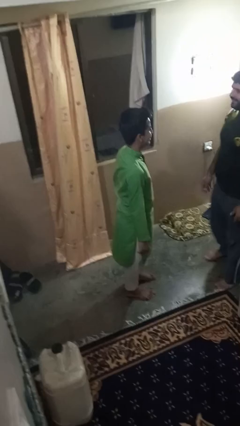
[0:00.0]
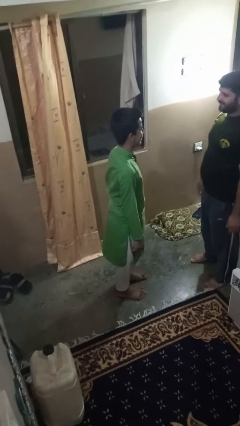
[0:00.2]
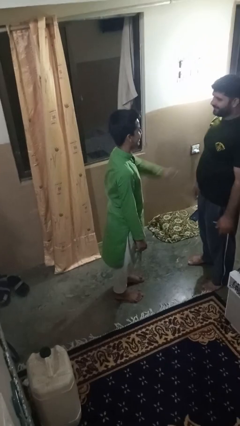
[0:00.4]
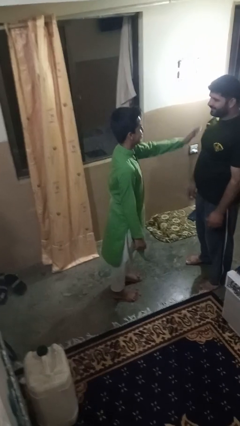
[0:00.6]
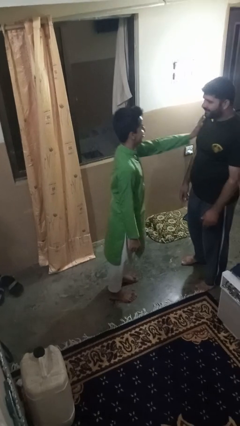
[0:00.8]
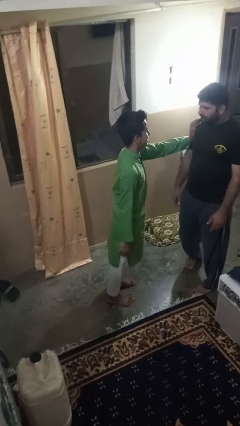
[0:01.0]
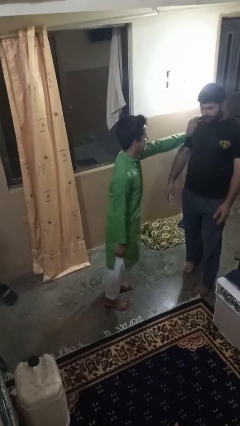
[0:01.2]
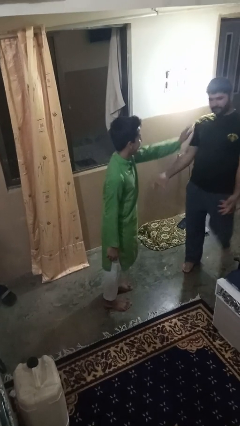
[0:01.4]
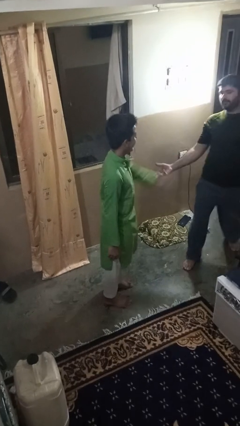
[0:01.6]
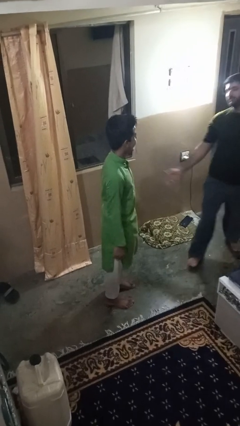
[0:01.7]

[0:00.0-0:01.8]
person shoves person

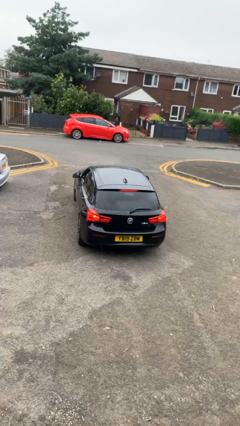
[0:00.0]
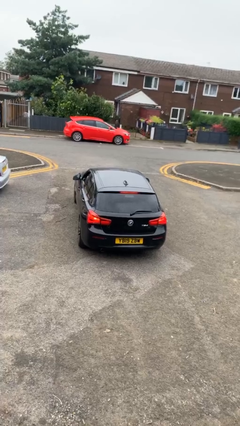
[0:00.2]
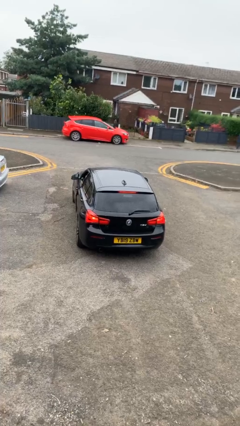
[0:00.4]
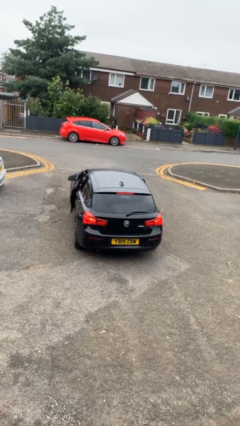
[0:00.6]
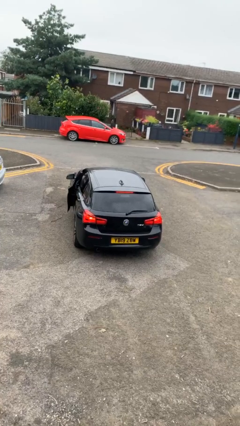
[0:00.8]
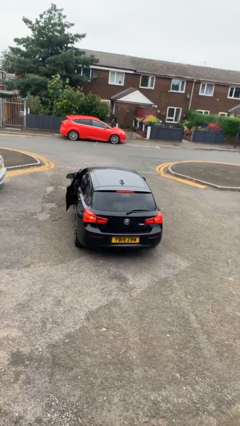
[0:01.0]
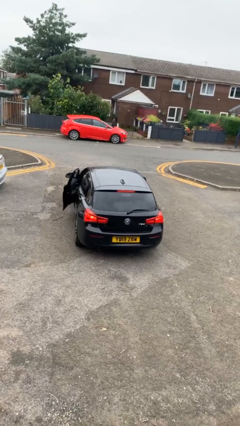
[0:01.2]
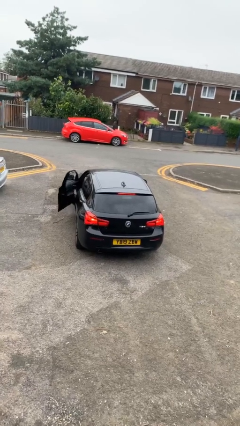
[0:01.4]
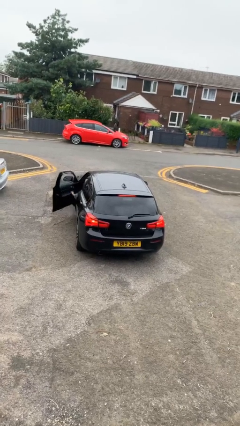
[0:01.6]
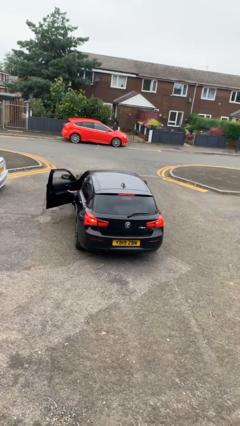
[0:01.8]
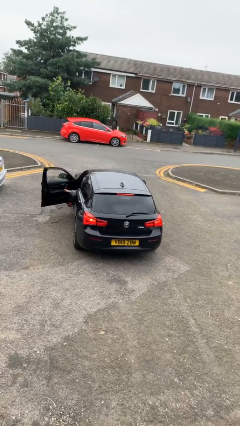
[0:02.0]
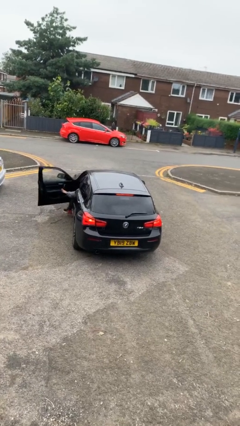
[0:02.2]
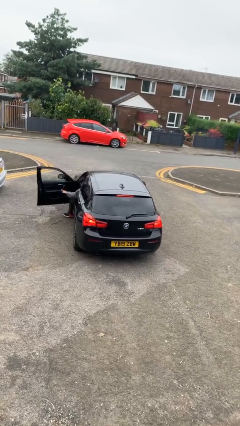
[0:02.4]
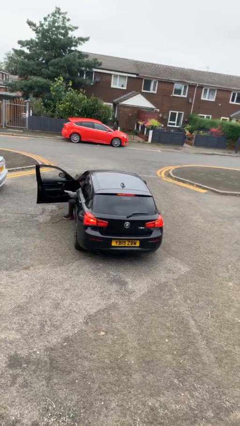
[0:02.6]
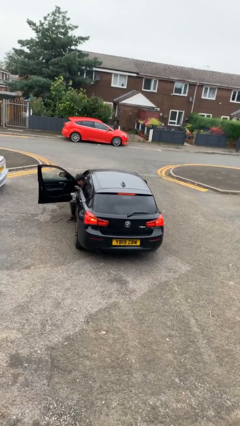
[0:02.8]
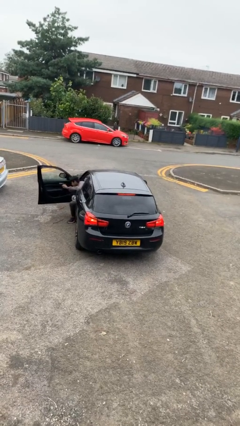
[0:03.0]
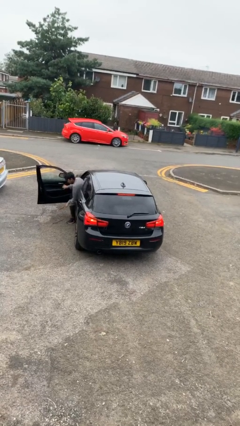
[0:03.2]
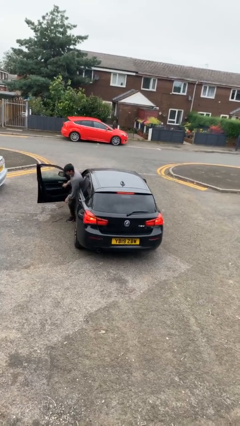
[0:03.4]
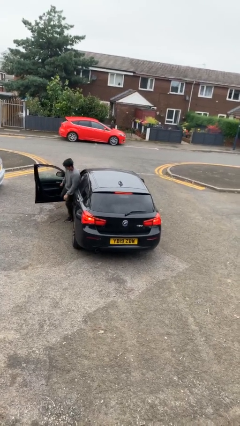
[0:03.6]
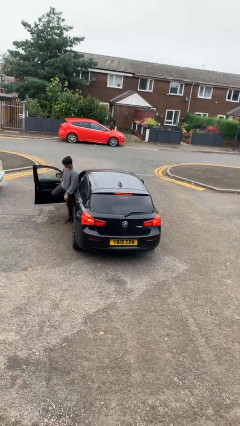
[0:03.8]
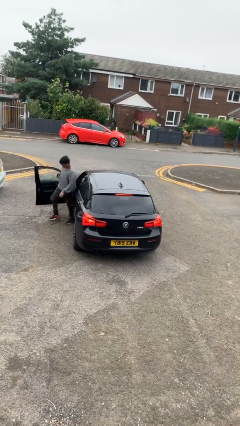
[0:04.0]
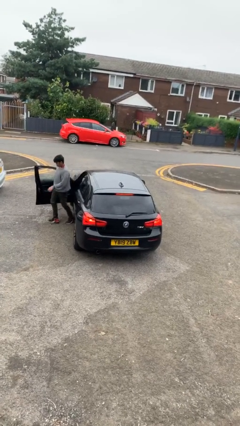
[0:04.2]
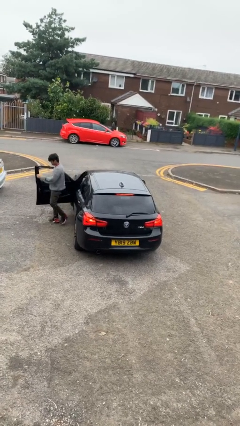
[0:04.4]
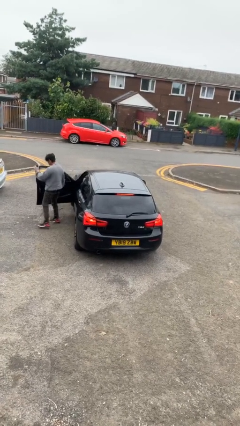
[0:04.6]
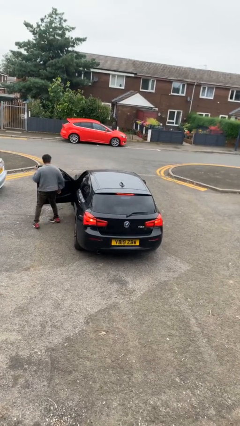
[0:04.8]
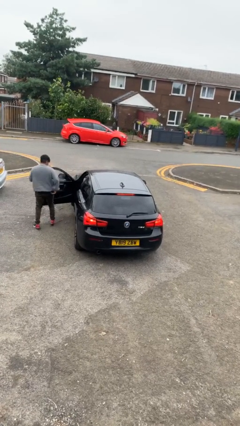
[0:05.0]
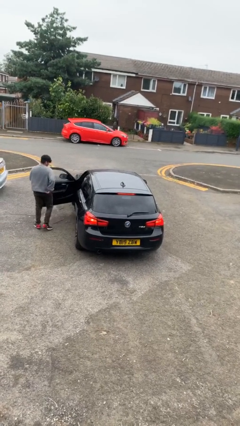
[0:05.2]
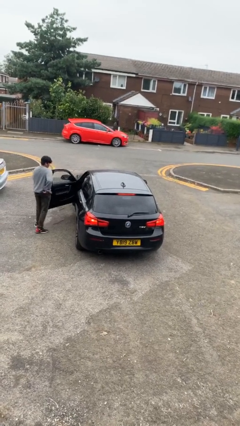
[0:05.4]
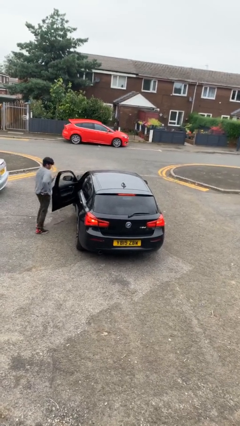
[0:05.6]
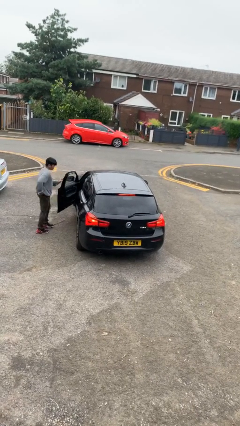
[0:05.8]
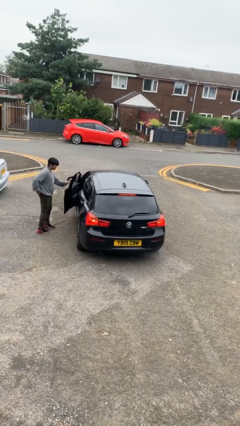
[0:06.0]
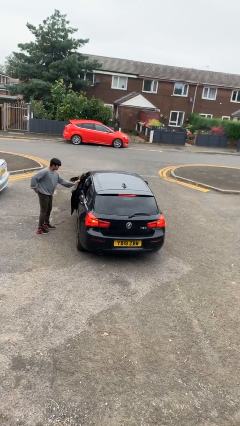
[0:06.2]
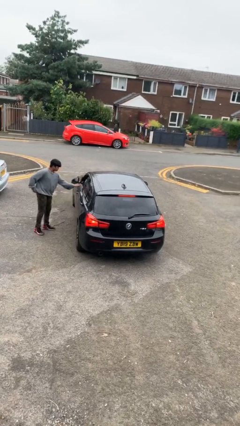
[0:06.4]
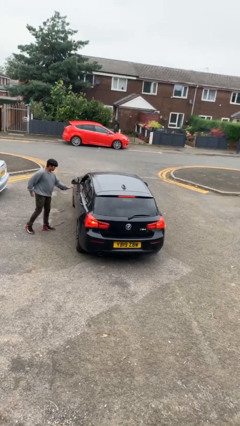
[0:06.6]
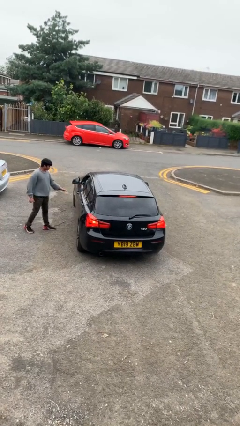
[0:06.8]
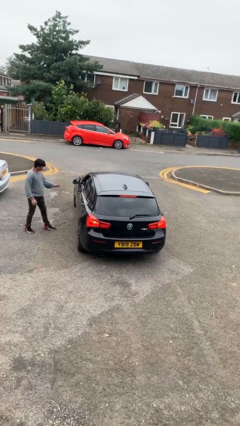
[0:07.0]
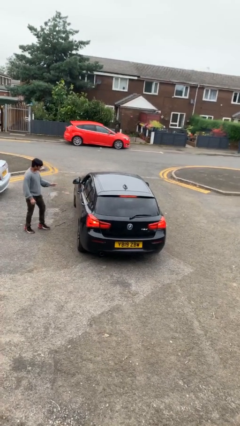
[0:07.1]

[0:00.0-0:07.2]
car drops off person

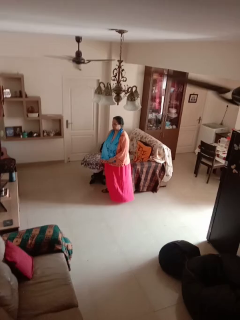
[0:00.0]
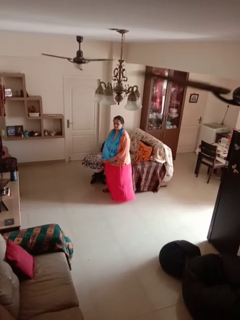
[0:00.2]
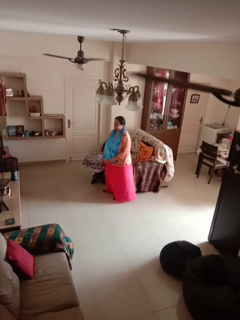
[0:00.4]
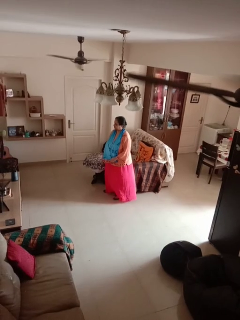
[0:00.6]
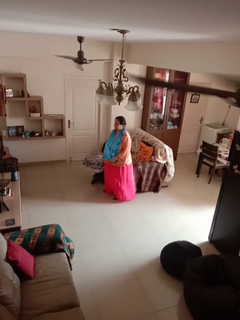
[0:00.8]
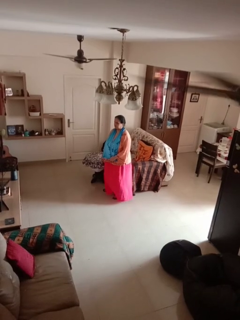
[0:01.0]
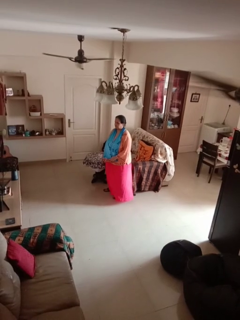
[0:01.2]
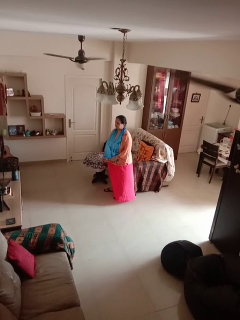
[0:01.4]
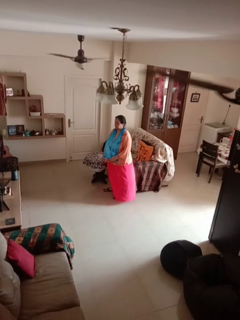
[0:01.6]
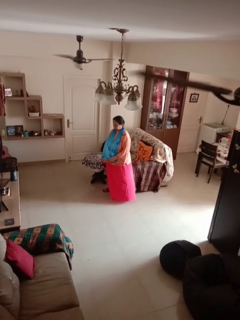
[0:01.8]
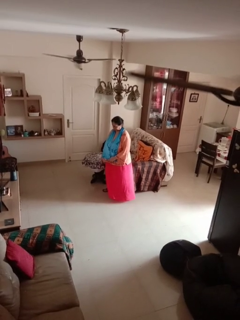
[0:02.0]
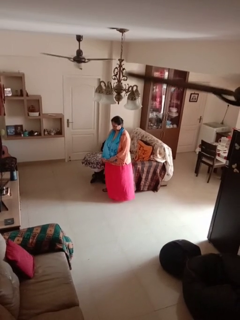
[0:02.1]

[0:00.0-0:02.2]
person shakes head

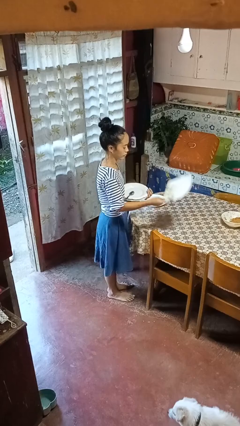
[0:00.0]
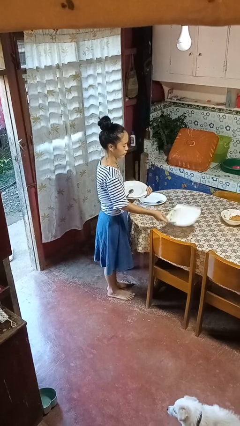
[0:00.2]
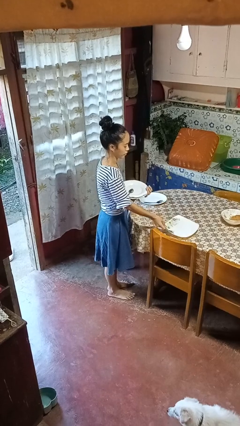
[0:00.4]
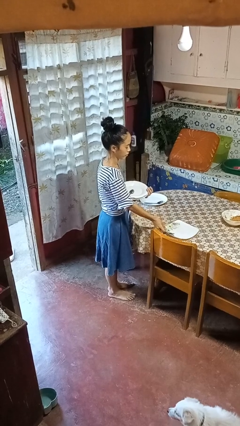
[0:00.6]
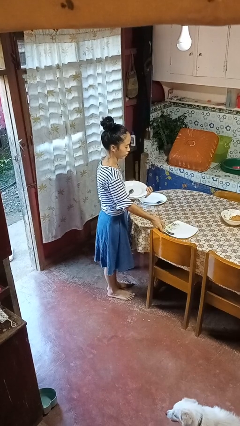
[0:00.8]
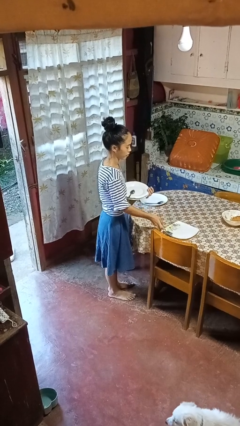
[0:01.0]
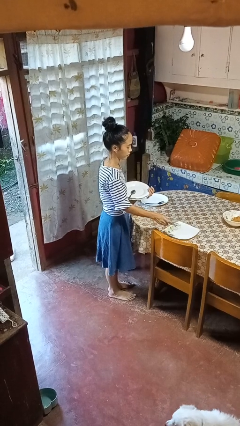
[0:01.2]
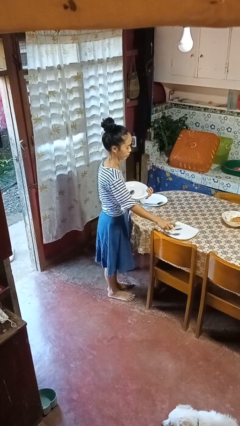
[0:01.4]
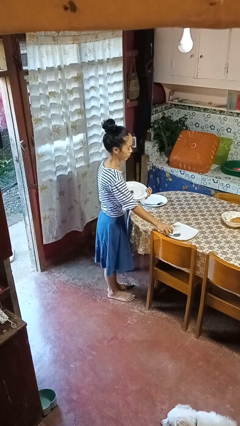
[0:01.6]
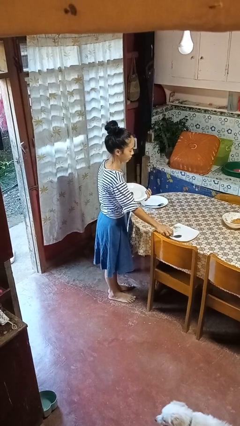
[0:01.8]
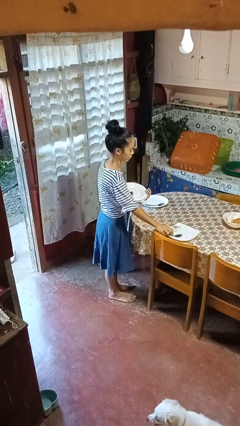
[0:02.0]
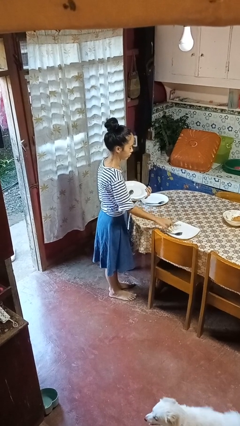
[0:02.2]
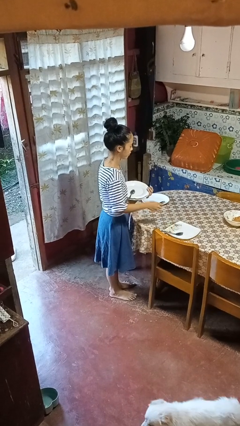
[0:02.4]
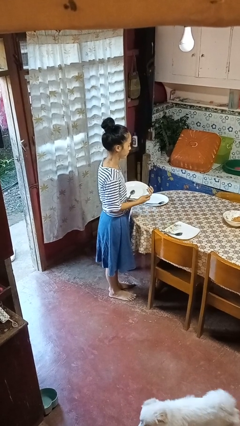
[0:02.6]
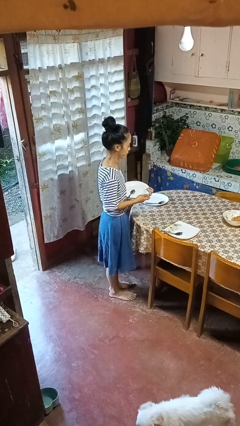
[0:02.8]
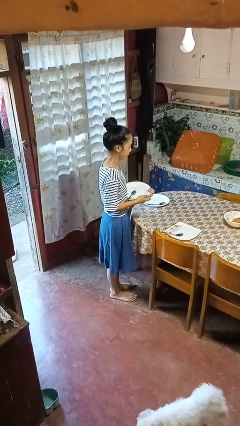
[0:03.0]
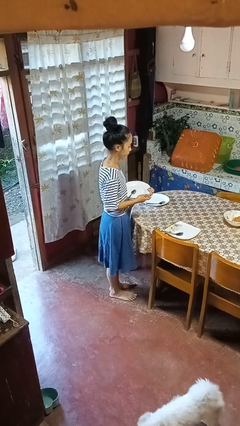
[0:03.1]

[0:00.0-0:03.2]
person sets table

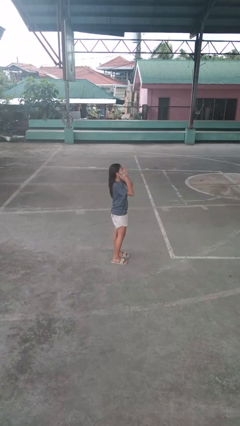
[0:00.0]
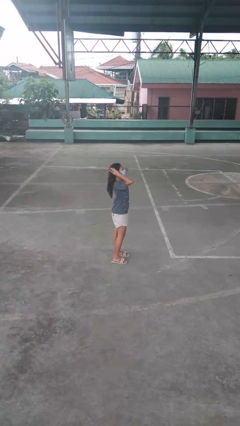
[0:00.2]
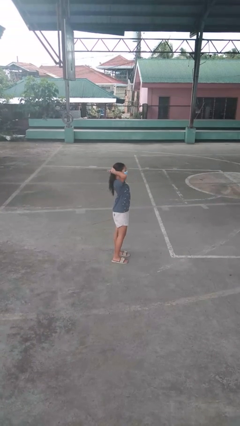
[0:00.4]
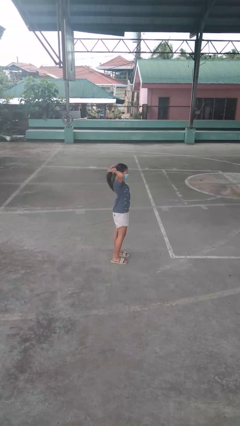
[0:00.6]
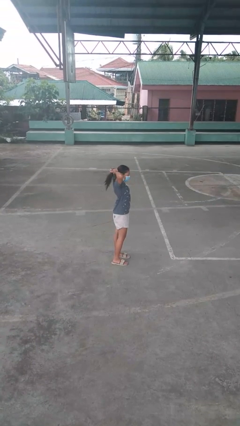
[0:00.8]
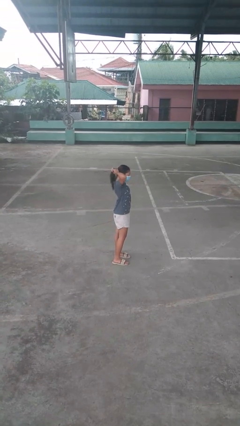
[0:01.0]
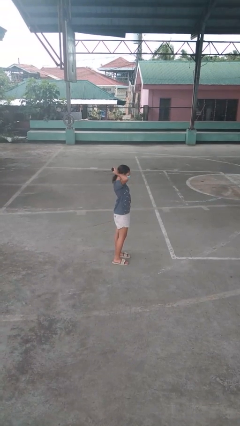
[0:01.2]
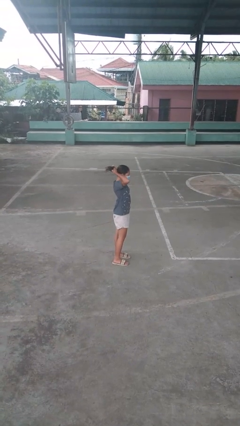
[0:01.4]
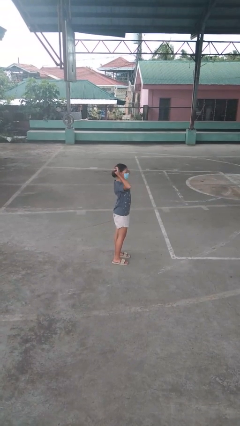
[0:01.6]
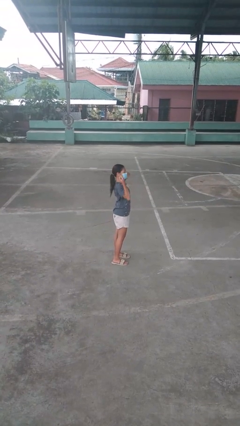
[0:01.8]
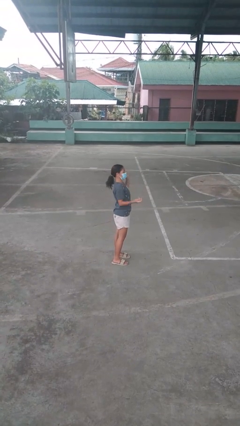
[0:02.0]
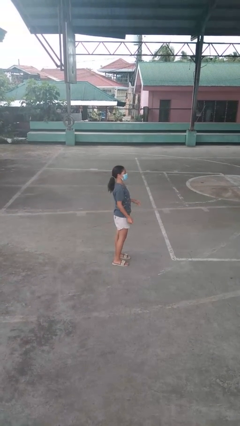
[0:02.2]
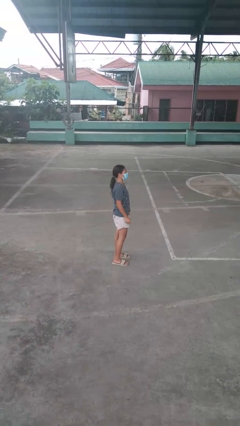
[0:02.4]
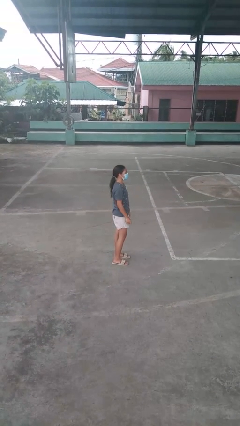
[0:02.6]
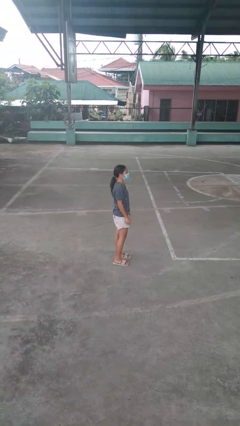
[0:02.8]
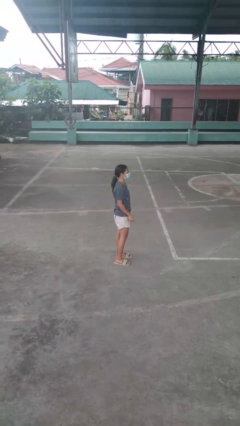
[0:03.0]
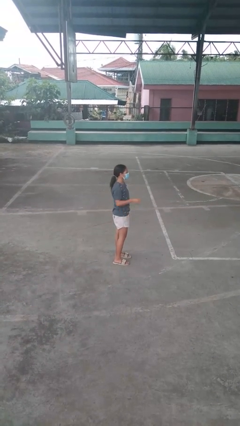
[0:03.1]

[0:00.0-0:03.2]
person puts hair in ponytail

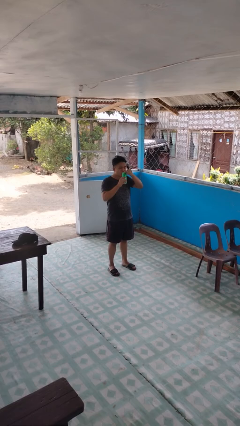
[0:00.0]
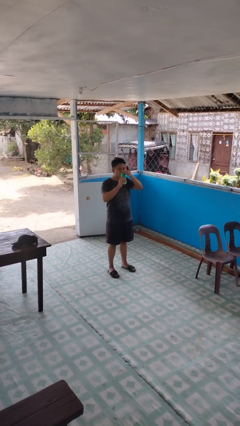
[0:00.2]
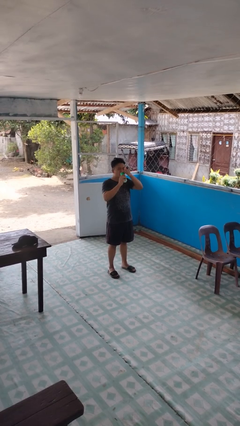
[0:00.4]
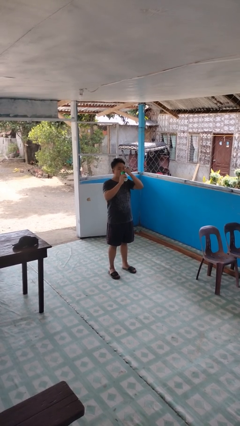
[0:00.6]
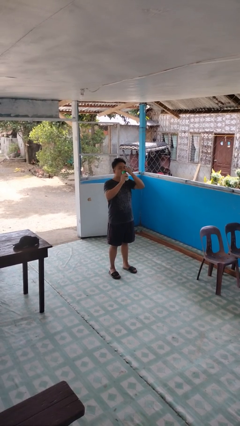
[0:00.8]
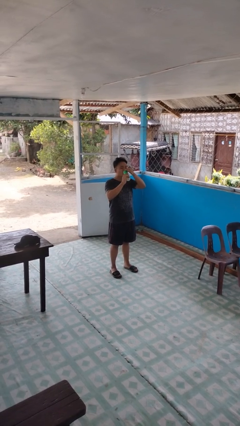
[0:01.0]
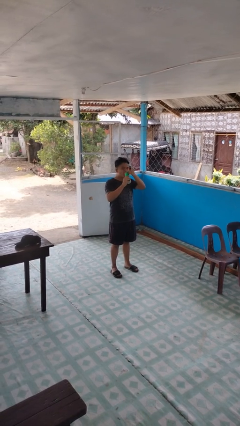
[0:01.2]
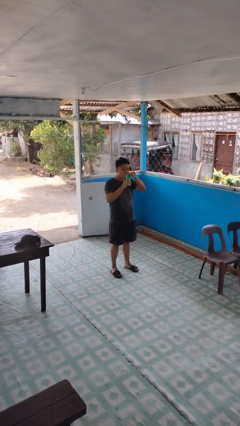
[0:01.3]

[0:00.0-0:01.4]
person drinks from beverage can
